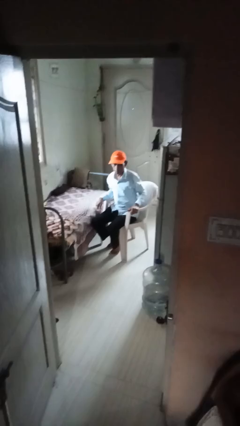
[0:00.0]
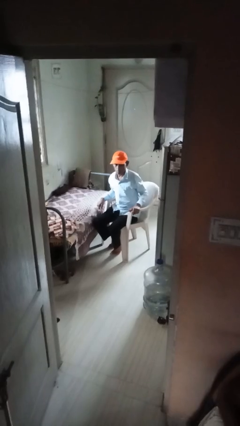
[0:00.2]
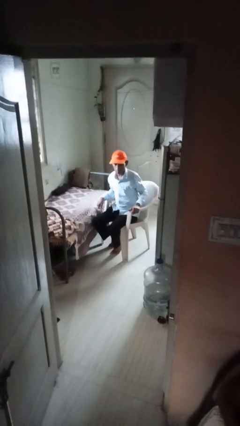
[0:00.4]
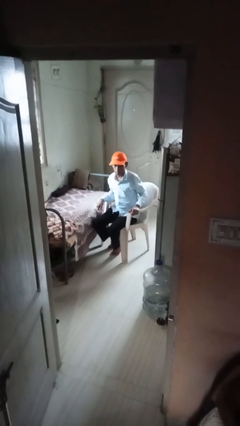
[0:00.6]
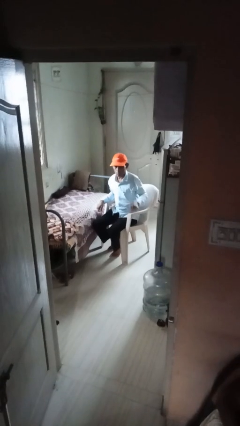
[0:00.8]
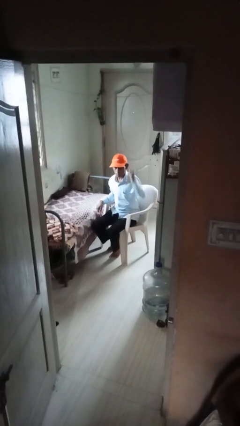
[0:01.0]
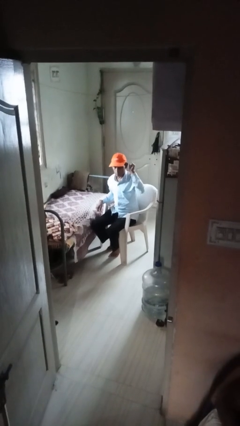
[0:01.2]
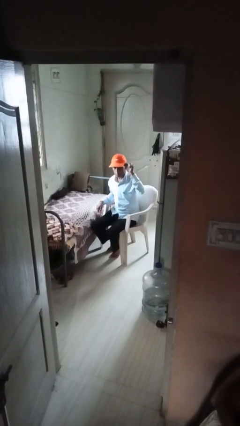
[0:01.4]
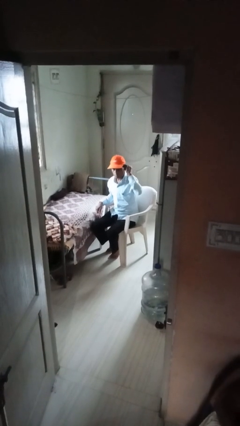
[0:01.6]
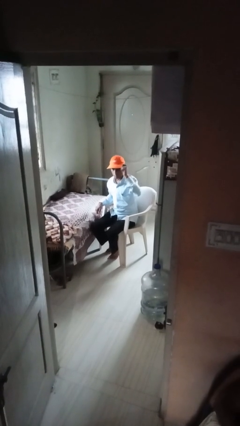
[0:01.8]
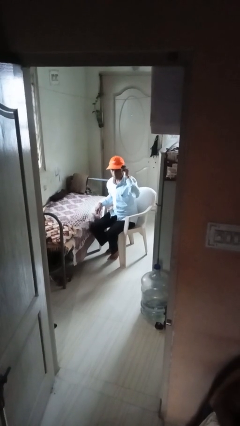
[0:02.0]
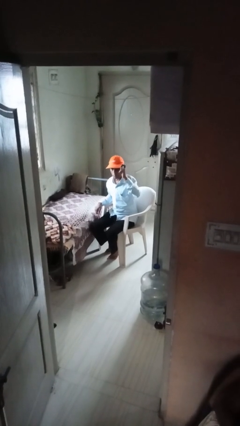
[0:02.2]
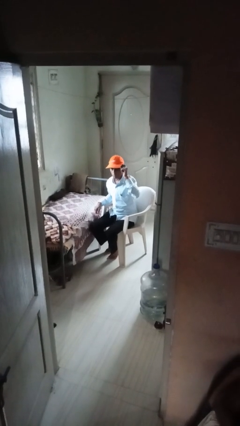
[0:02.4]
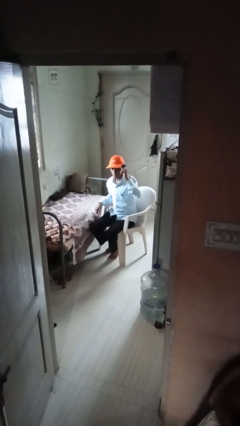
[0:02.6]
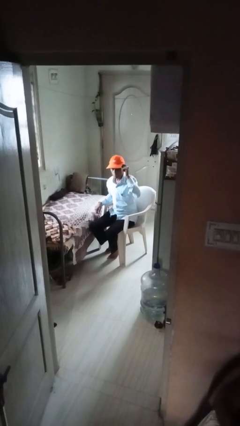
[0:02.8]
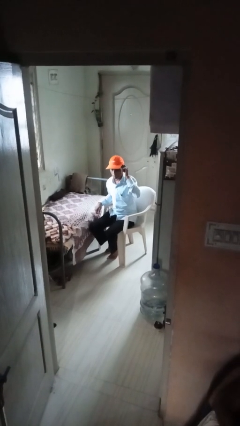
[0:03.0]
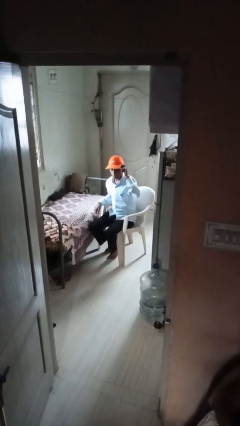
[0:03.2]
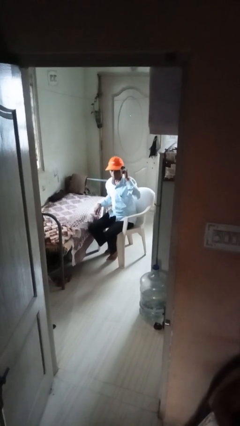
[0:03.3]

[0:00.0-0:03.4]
person gestures behind me

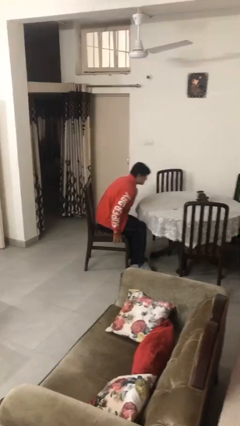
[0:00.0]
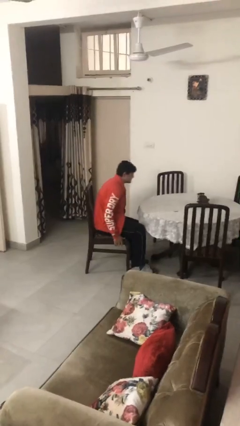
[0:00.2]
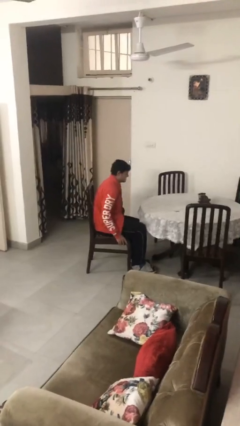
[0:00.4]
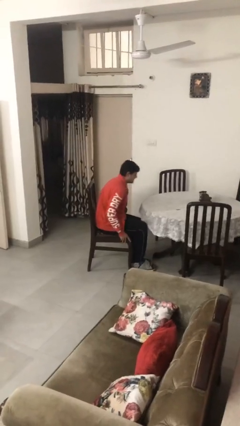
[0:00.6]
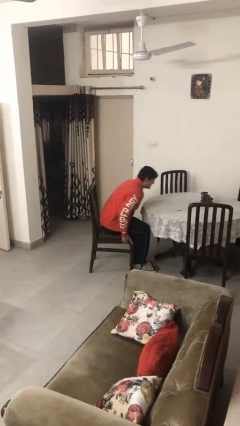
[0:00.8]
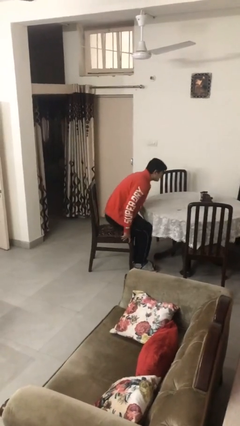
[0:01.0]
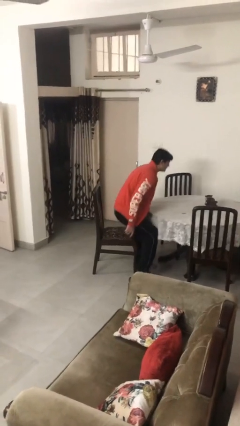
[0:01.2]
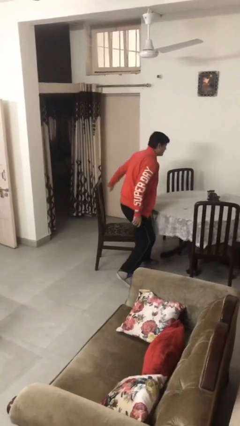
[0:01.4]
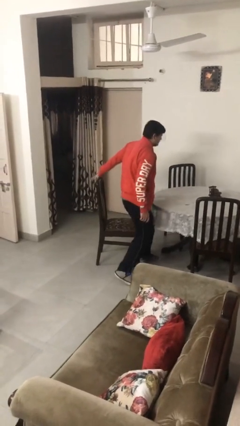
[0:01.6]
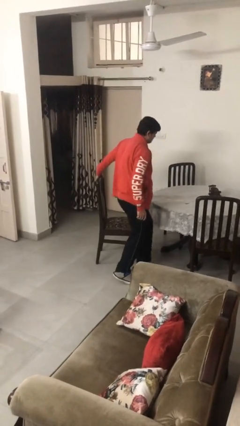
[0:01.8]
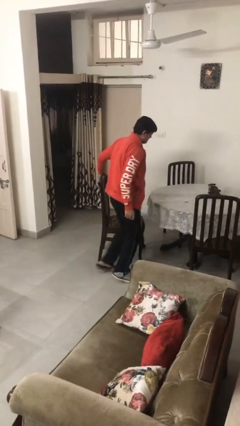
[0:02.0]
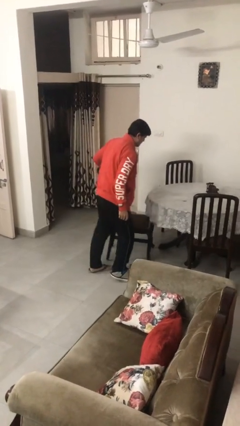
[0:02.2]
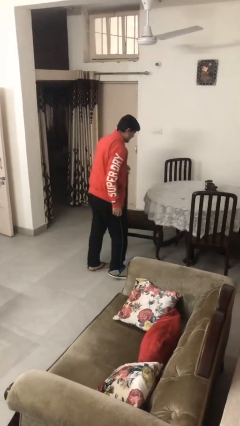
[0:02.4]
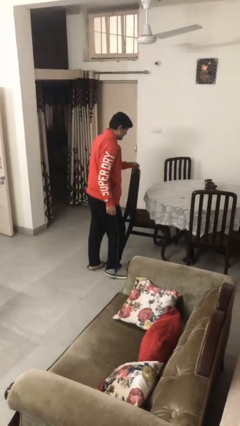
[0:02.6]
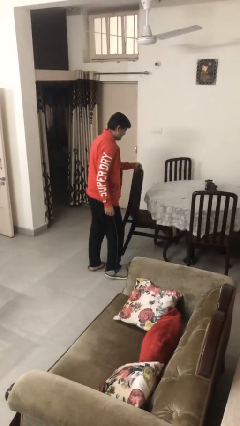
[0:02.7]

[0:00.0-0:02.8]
person stands up

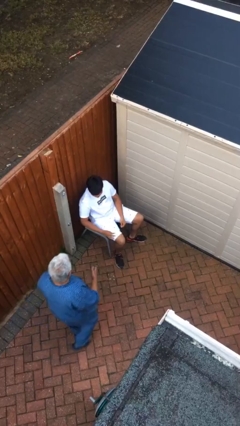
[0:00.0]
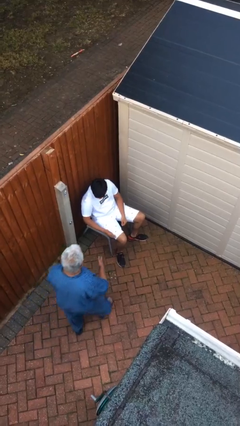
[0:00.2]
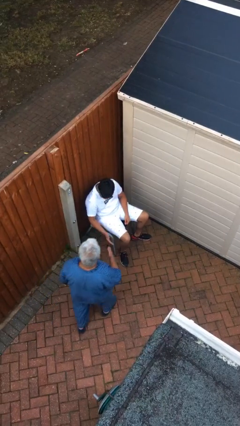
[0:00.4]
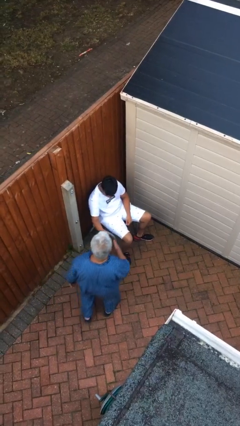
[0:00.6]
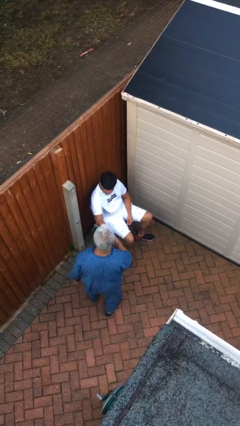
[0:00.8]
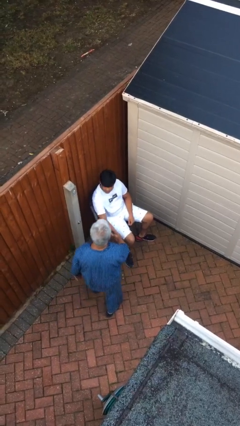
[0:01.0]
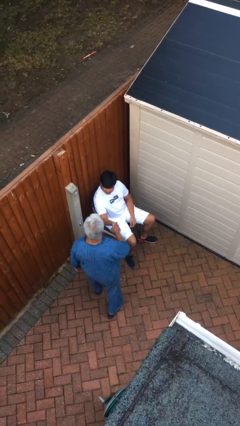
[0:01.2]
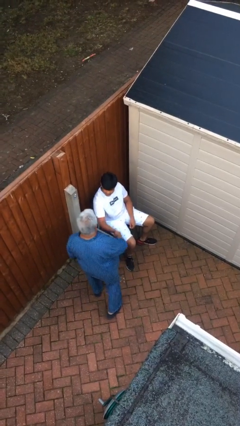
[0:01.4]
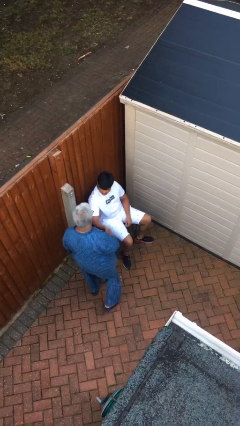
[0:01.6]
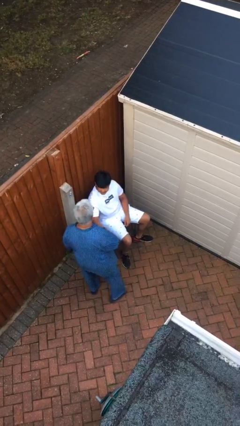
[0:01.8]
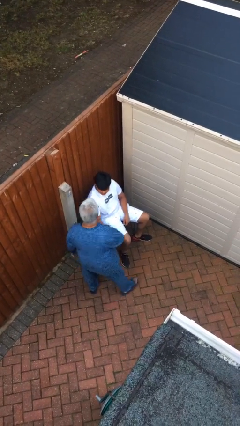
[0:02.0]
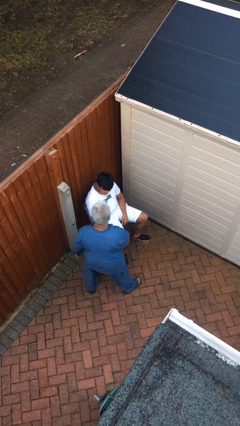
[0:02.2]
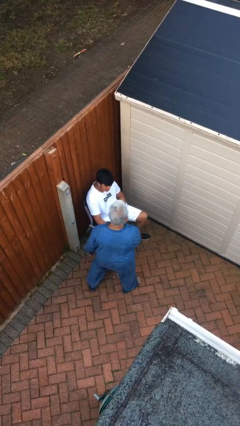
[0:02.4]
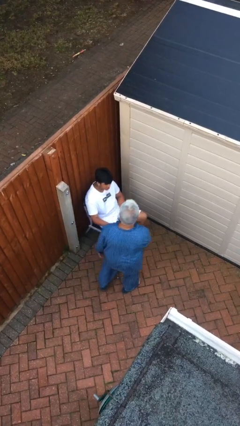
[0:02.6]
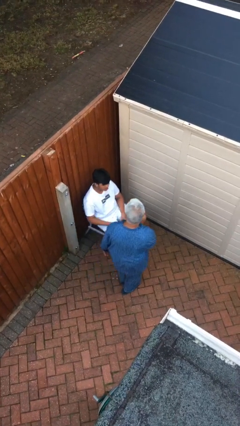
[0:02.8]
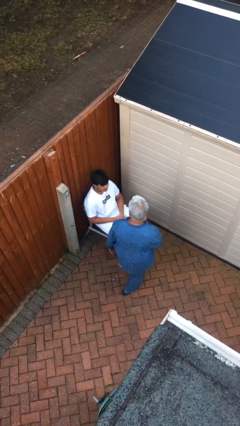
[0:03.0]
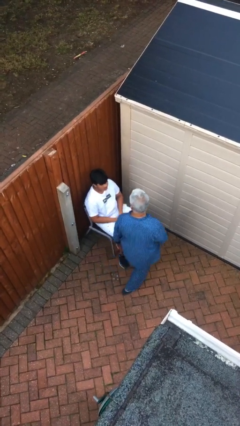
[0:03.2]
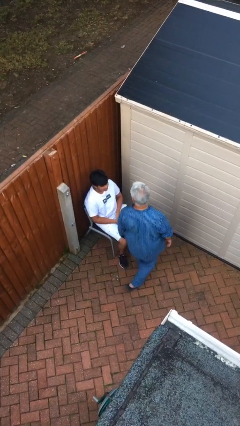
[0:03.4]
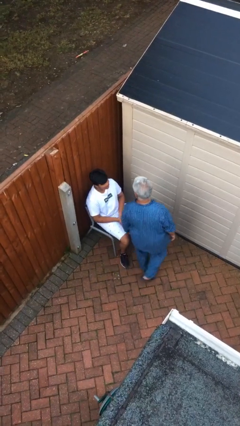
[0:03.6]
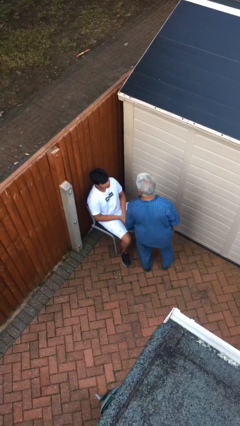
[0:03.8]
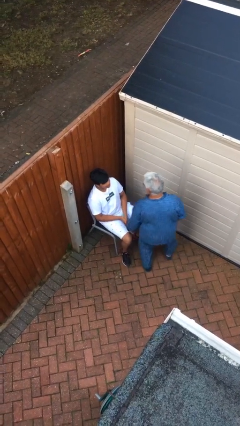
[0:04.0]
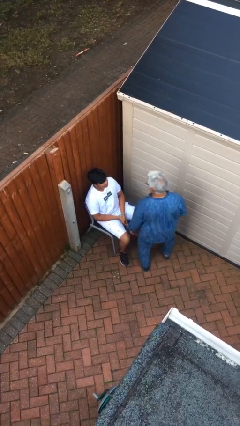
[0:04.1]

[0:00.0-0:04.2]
person shakes hand

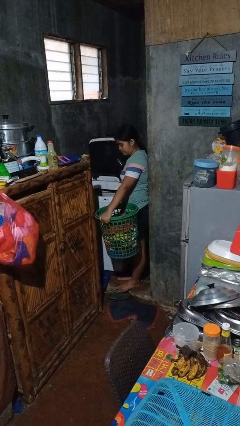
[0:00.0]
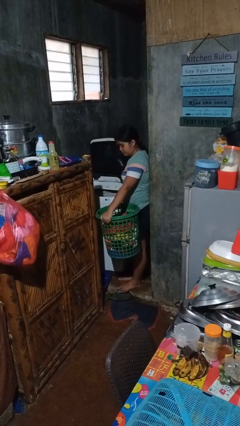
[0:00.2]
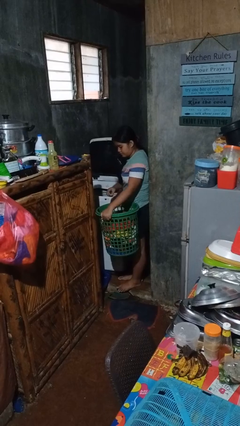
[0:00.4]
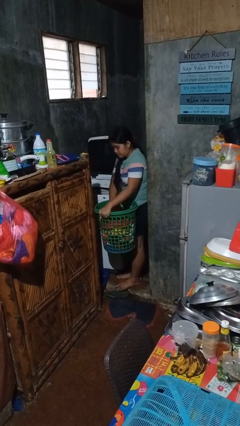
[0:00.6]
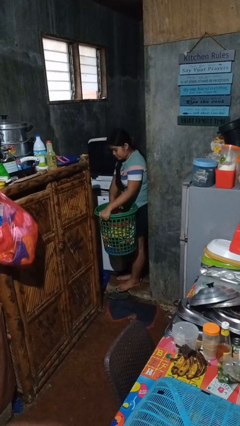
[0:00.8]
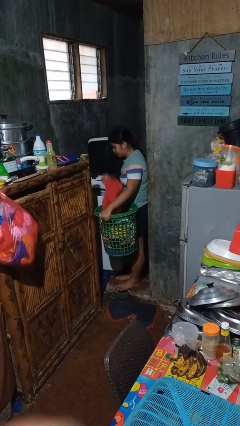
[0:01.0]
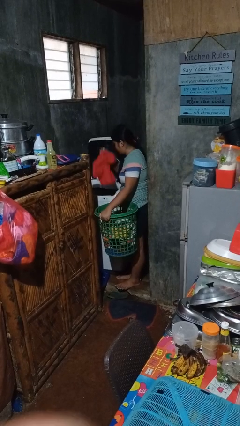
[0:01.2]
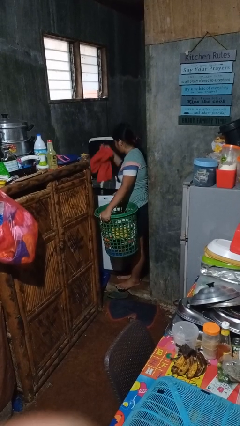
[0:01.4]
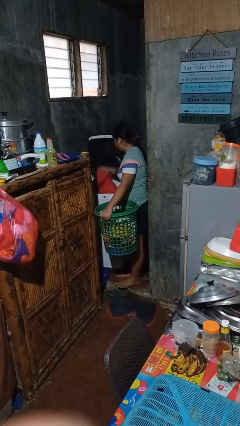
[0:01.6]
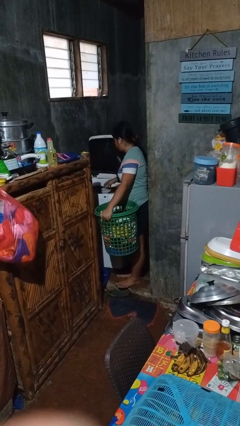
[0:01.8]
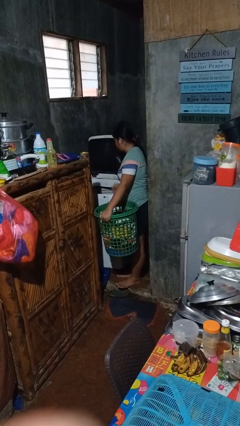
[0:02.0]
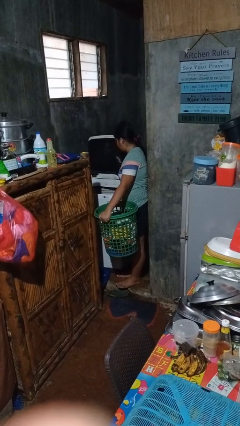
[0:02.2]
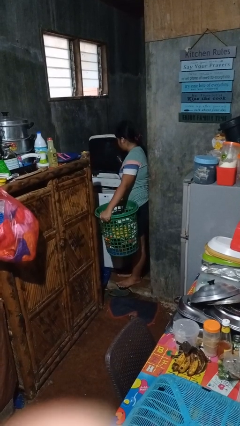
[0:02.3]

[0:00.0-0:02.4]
person loads clotheswasher

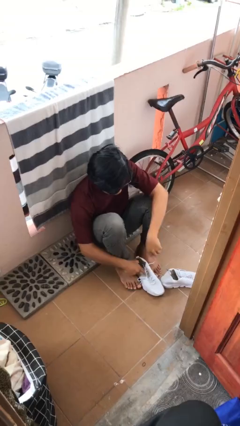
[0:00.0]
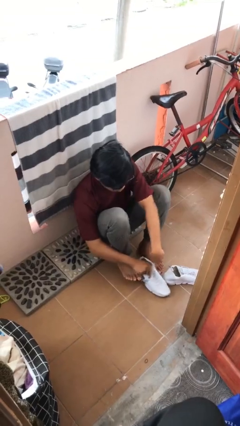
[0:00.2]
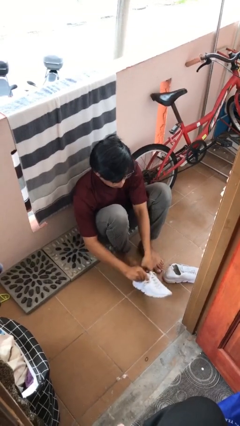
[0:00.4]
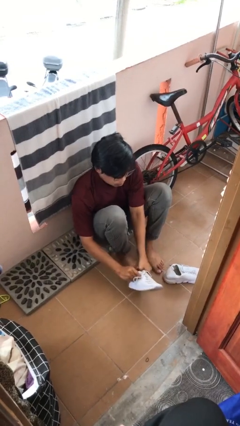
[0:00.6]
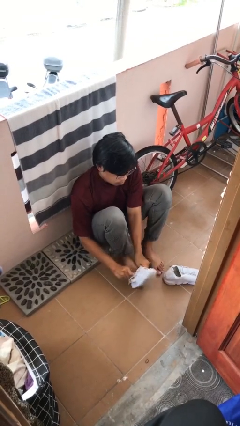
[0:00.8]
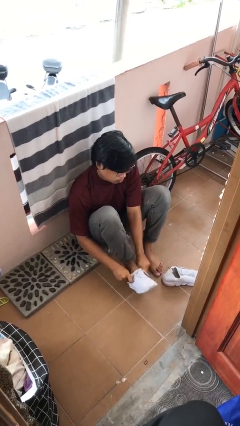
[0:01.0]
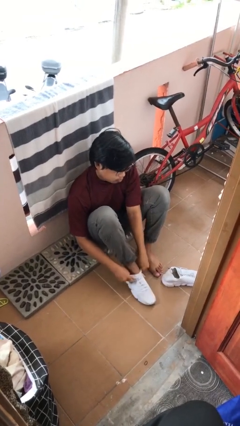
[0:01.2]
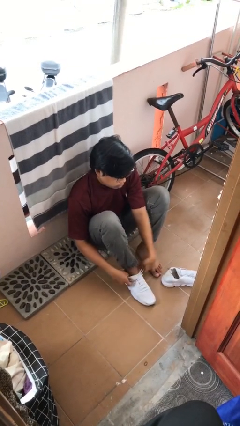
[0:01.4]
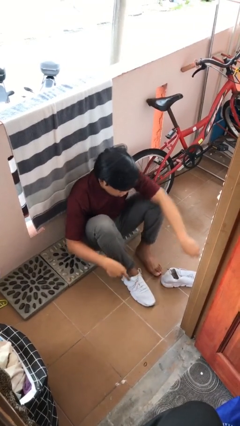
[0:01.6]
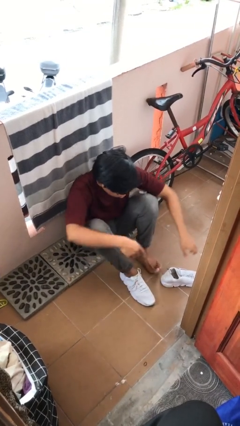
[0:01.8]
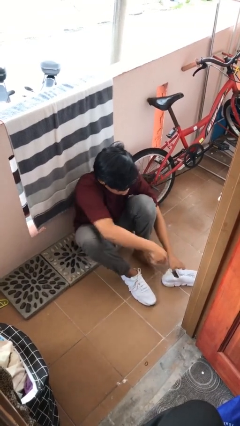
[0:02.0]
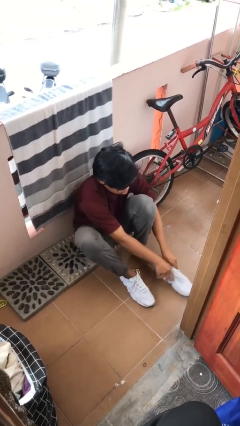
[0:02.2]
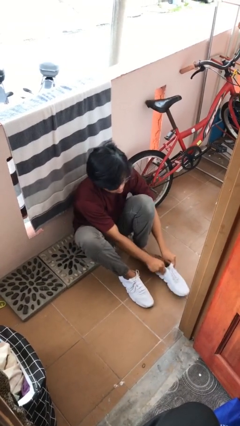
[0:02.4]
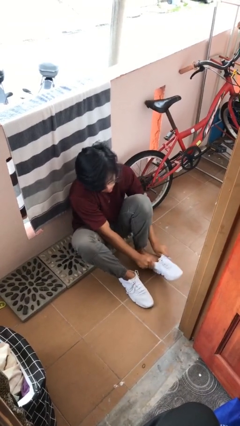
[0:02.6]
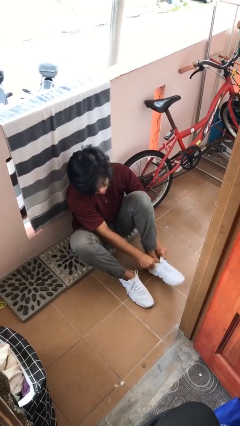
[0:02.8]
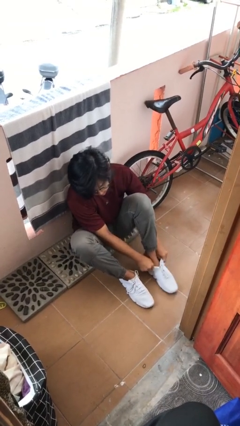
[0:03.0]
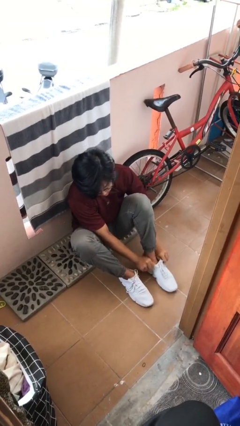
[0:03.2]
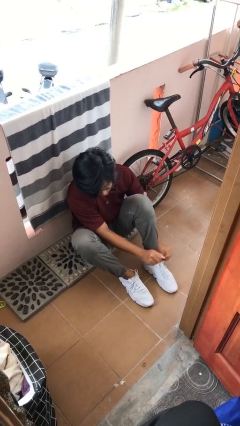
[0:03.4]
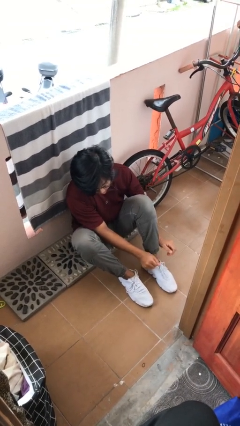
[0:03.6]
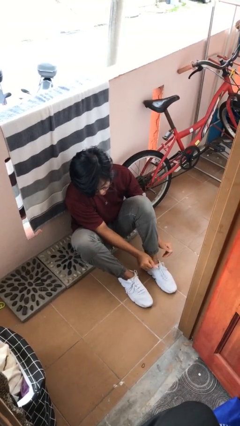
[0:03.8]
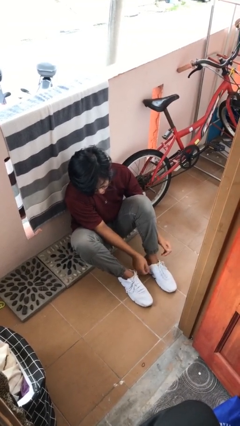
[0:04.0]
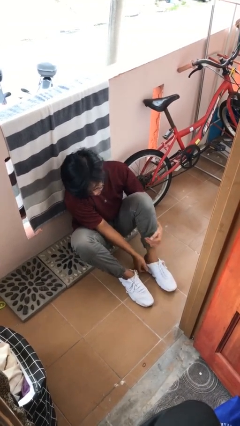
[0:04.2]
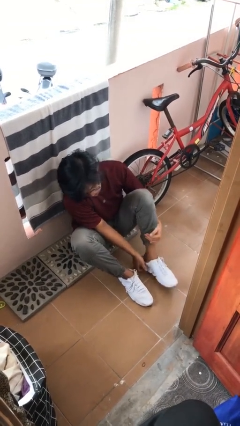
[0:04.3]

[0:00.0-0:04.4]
person puts on shoes

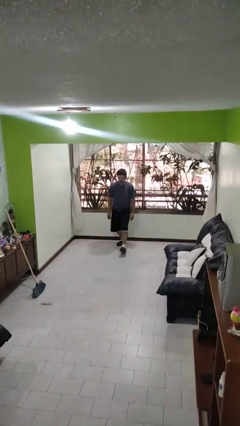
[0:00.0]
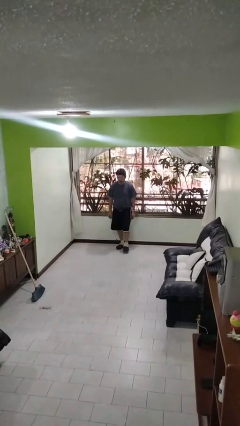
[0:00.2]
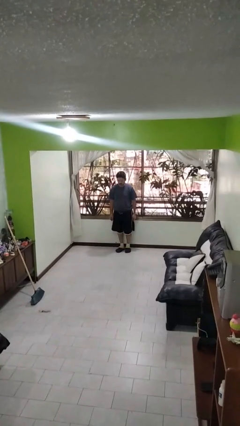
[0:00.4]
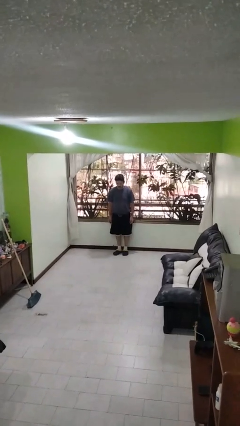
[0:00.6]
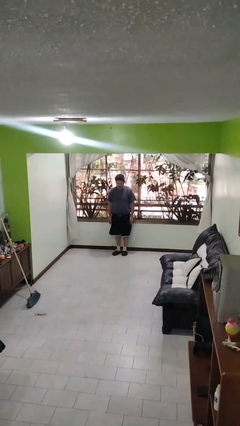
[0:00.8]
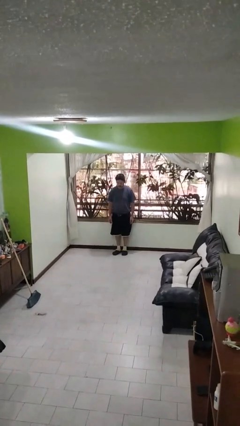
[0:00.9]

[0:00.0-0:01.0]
person stands up from floor
